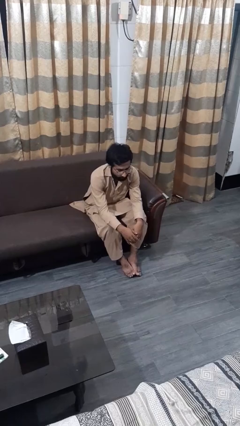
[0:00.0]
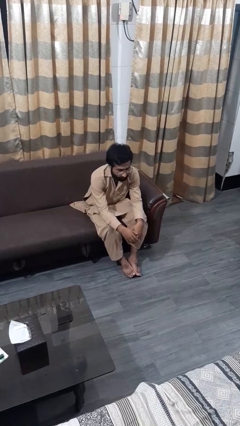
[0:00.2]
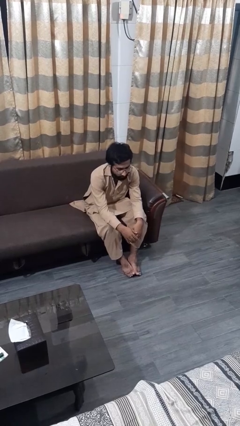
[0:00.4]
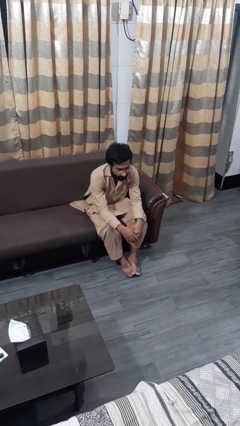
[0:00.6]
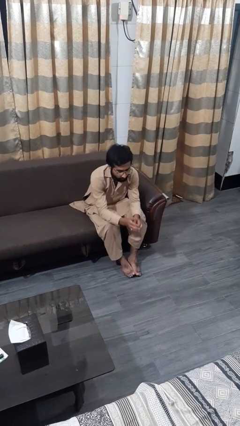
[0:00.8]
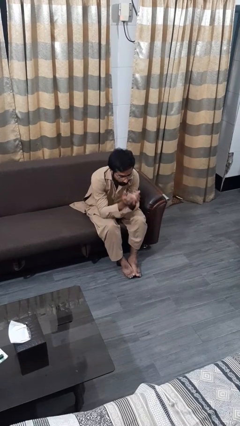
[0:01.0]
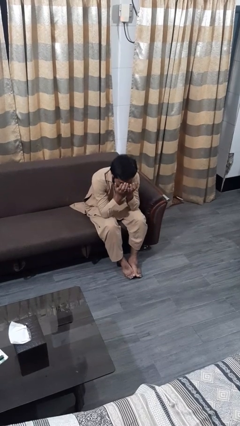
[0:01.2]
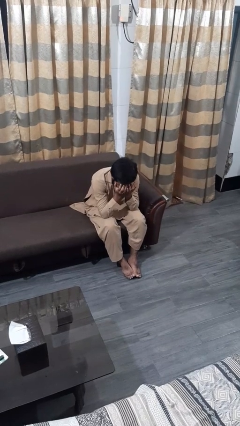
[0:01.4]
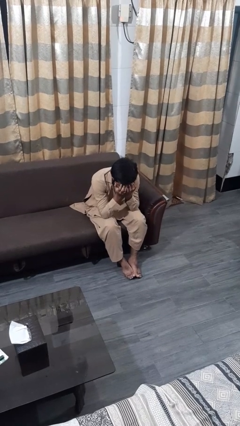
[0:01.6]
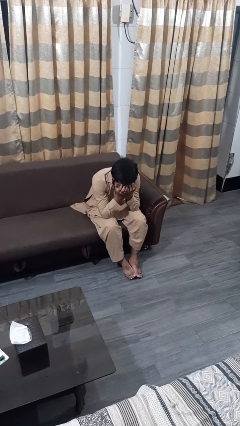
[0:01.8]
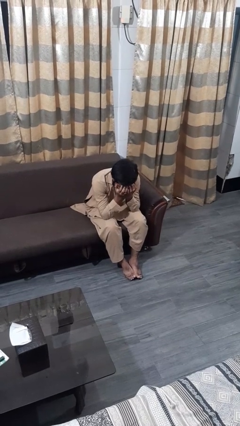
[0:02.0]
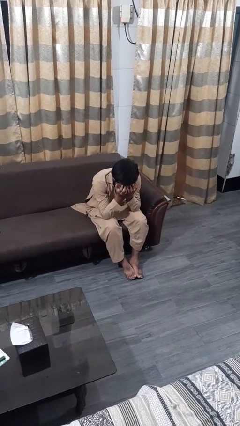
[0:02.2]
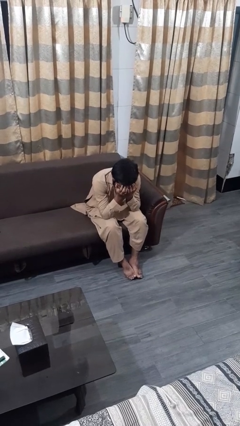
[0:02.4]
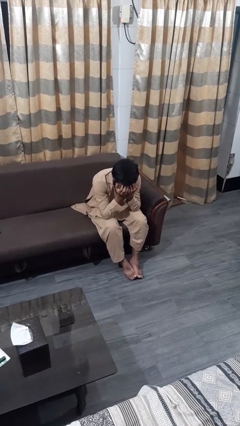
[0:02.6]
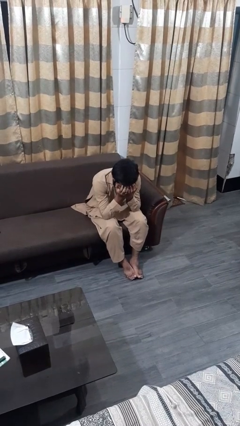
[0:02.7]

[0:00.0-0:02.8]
person covers face with hands

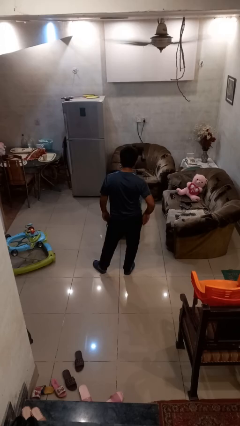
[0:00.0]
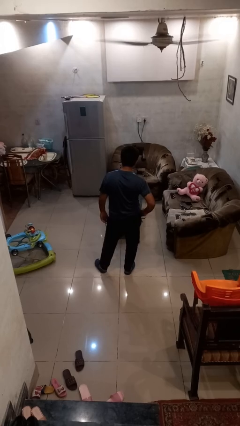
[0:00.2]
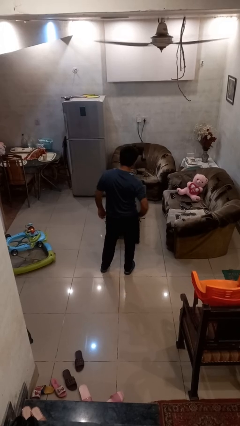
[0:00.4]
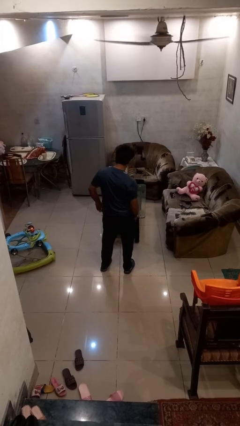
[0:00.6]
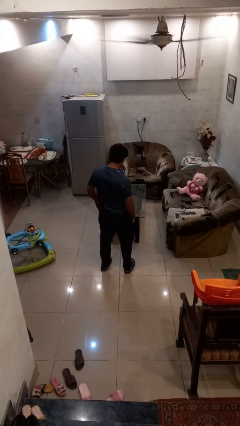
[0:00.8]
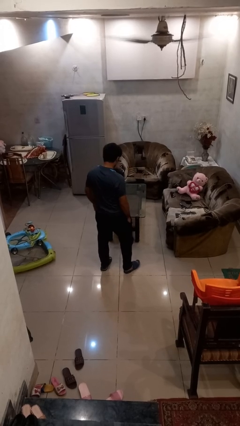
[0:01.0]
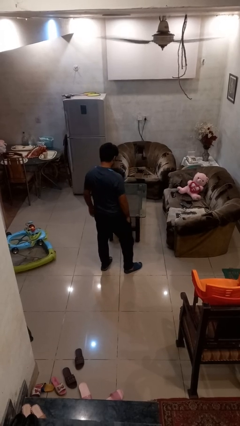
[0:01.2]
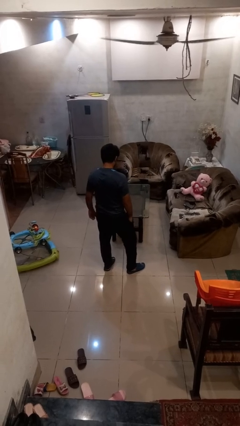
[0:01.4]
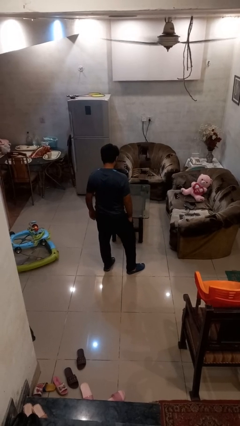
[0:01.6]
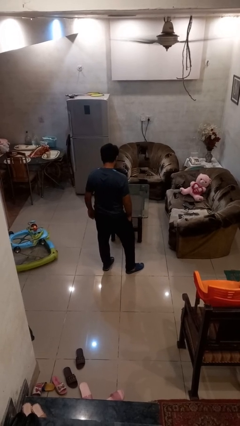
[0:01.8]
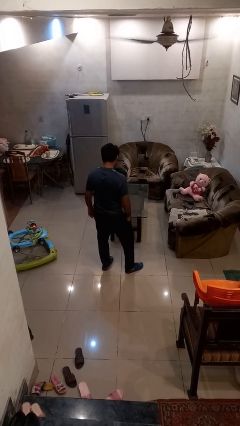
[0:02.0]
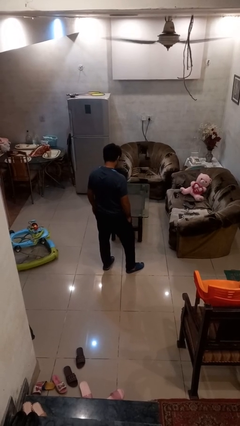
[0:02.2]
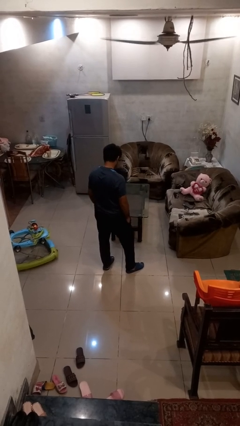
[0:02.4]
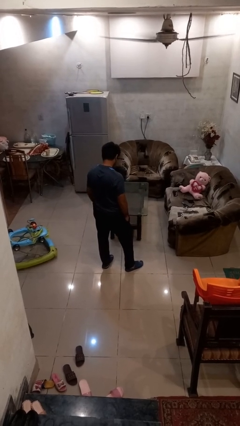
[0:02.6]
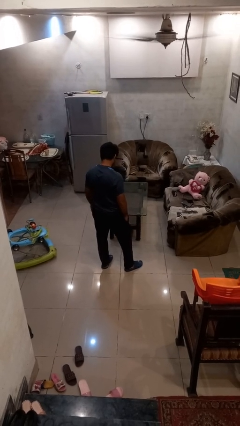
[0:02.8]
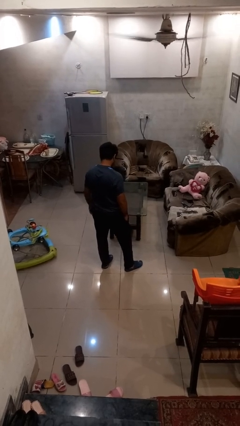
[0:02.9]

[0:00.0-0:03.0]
person puts hands in back pockets

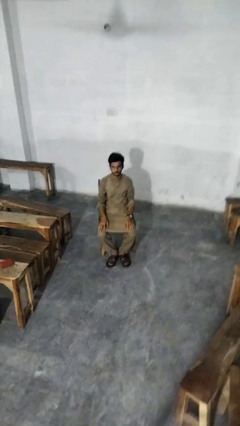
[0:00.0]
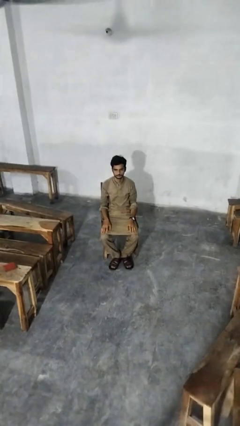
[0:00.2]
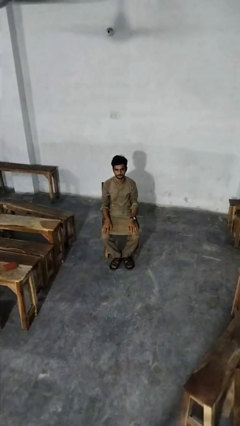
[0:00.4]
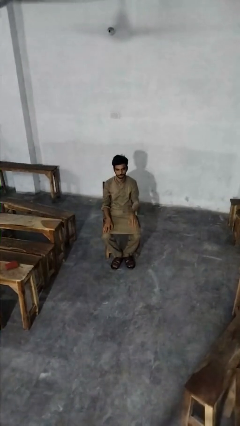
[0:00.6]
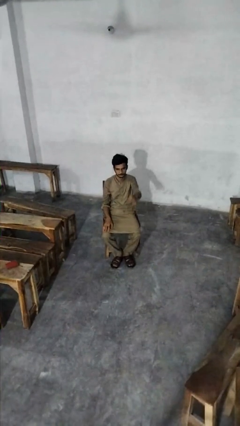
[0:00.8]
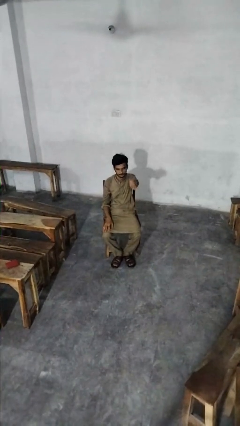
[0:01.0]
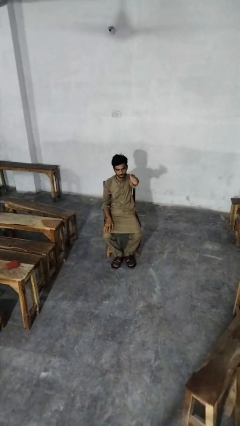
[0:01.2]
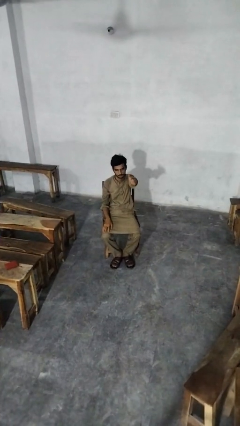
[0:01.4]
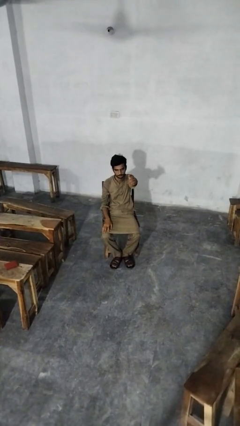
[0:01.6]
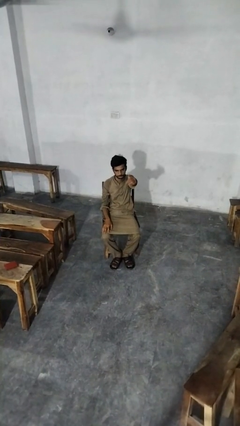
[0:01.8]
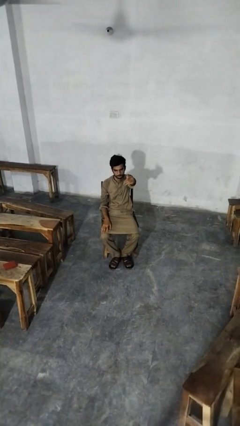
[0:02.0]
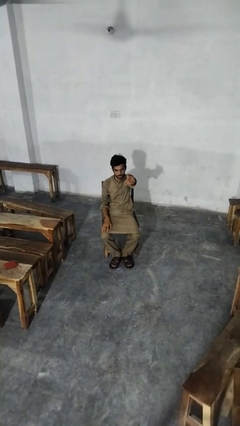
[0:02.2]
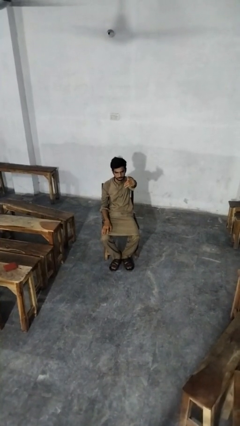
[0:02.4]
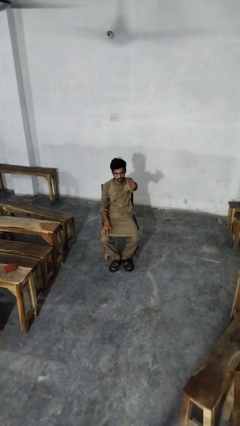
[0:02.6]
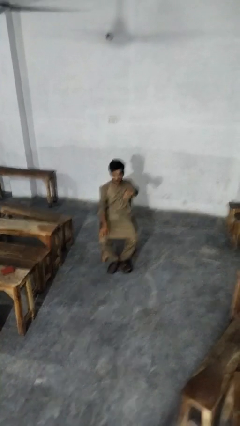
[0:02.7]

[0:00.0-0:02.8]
person gestures come here

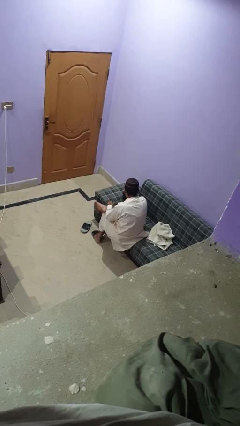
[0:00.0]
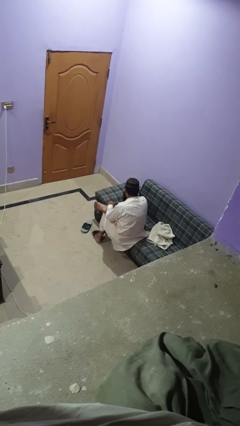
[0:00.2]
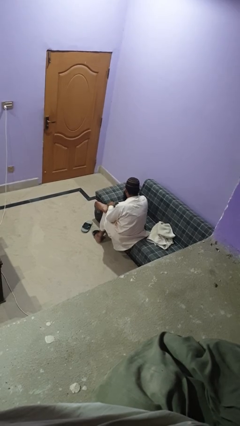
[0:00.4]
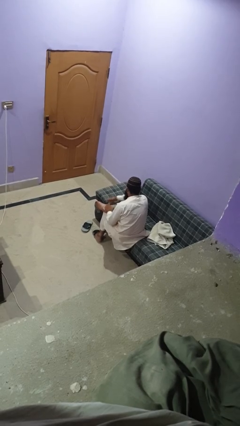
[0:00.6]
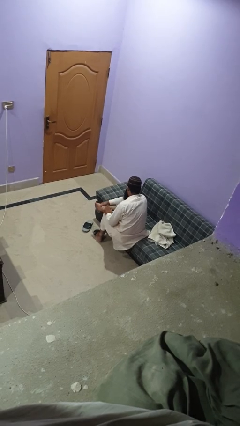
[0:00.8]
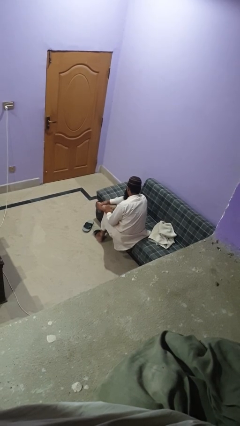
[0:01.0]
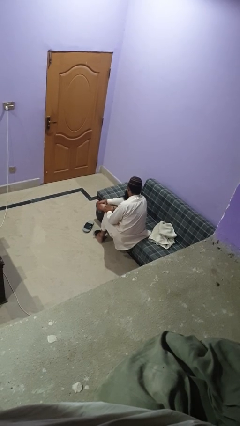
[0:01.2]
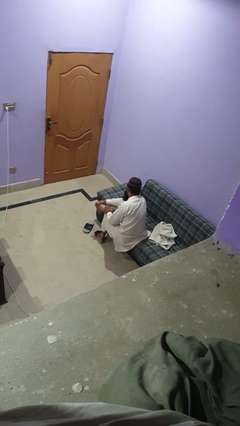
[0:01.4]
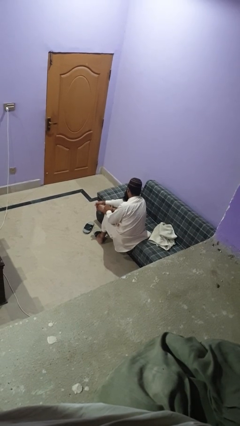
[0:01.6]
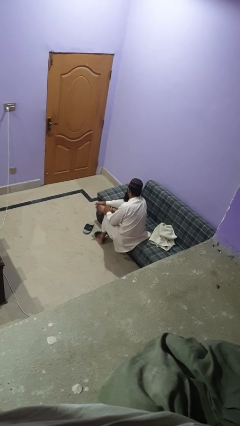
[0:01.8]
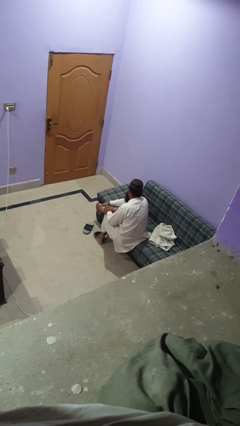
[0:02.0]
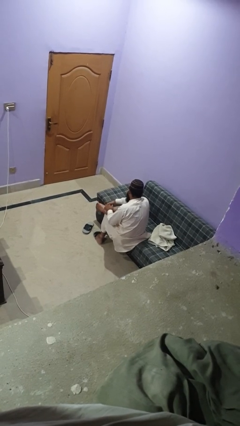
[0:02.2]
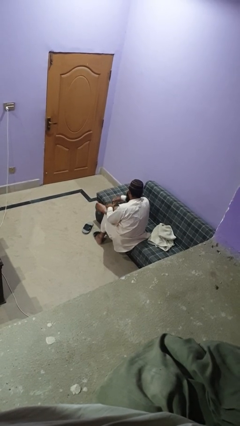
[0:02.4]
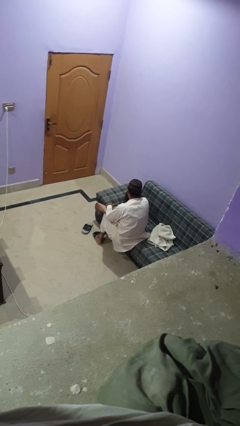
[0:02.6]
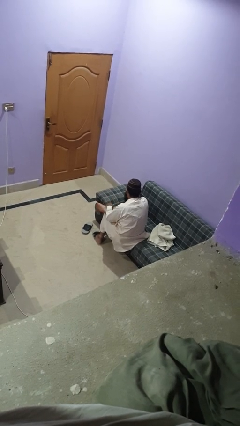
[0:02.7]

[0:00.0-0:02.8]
person rubs foot

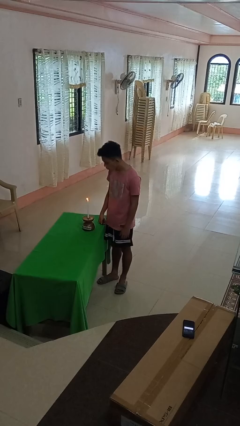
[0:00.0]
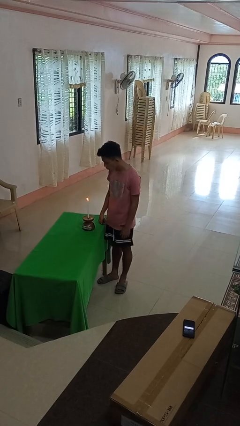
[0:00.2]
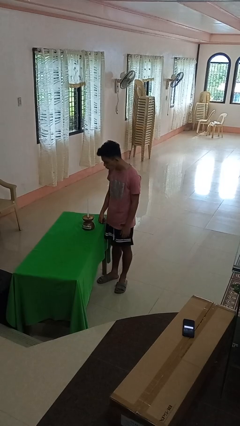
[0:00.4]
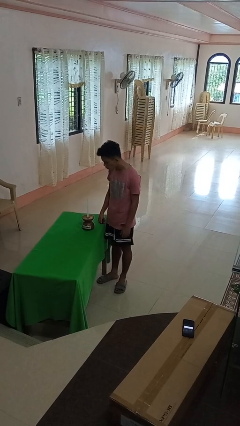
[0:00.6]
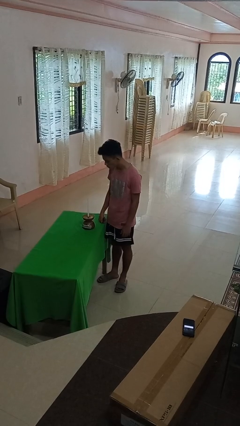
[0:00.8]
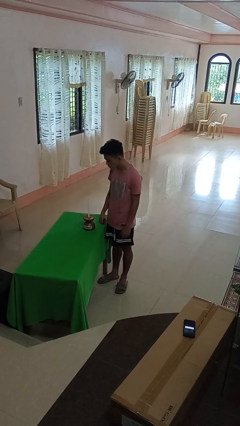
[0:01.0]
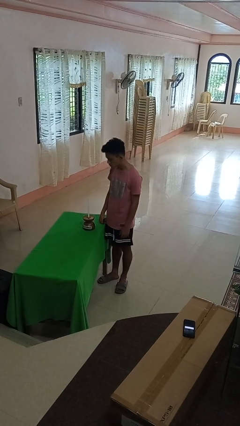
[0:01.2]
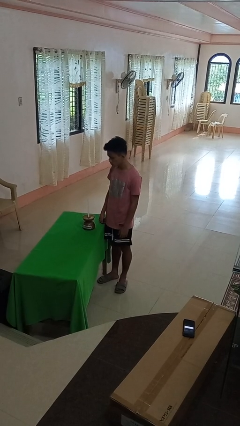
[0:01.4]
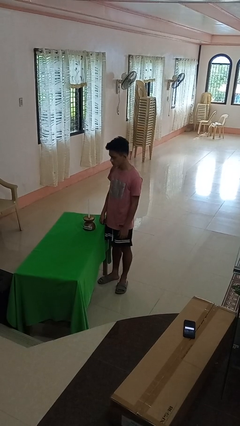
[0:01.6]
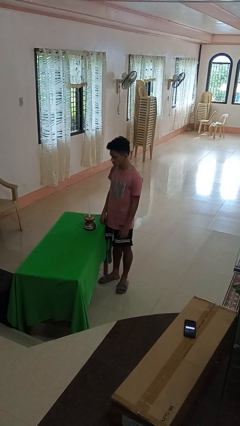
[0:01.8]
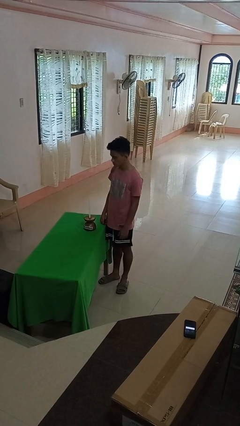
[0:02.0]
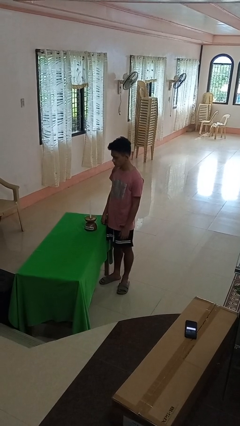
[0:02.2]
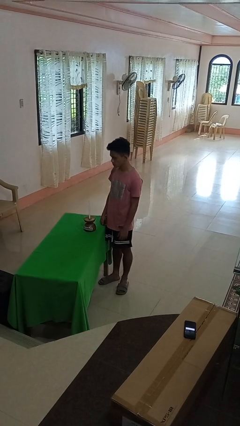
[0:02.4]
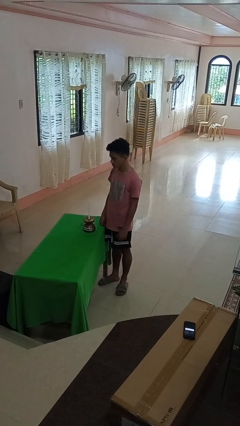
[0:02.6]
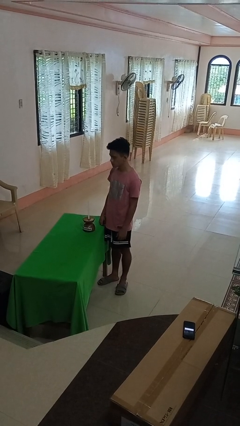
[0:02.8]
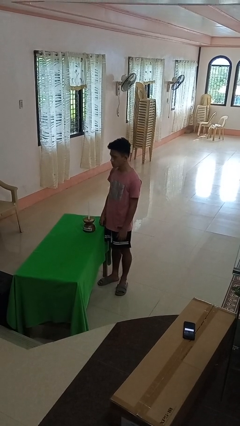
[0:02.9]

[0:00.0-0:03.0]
person extinguishes candle

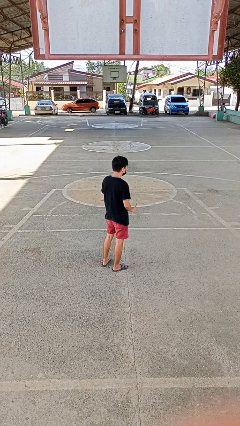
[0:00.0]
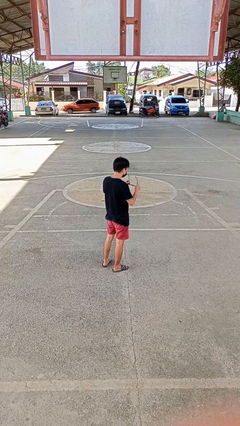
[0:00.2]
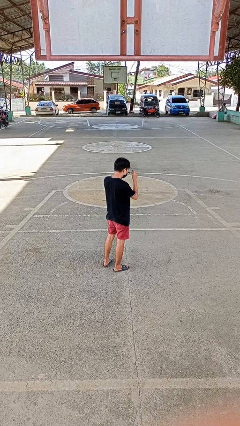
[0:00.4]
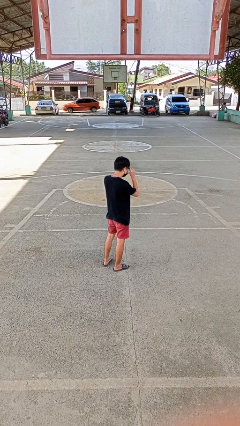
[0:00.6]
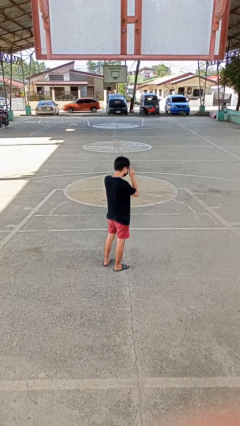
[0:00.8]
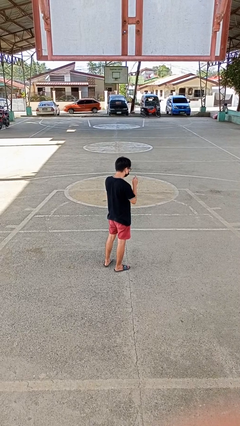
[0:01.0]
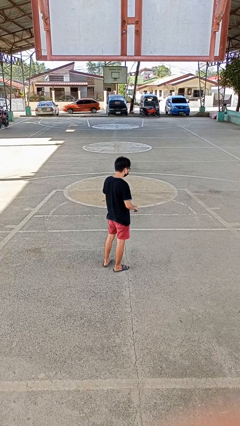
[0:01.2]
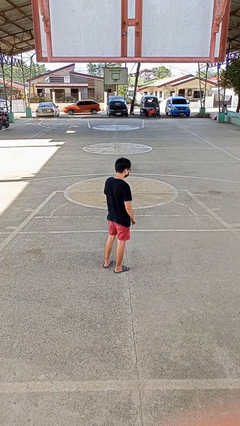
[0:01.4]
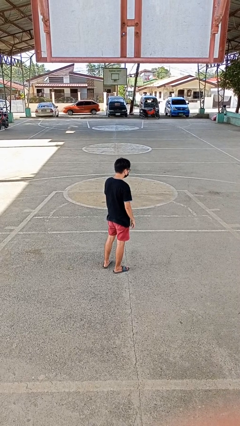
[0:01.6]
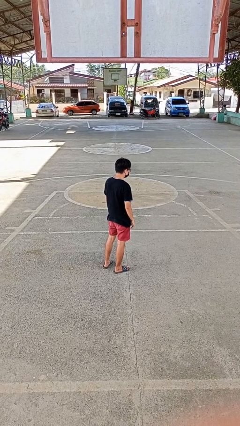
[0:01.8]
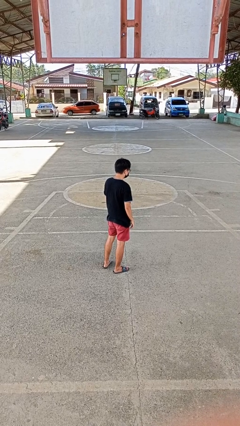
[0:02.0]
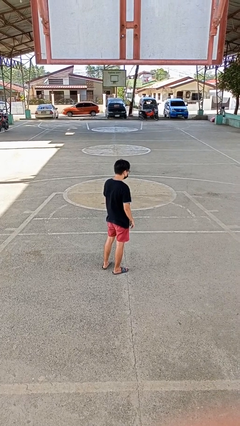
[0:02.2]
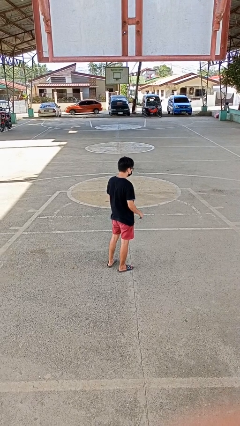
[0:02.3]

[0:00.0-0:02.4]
person puts on glasses

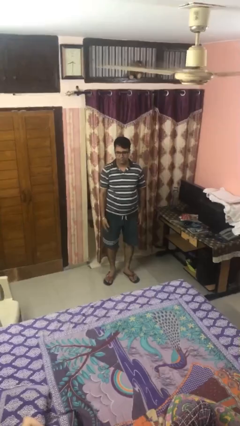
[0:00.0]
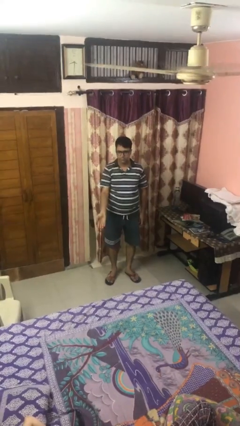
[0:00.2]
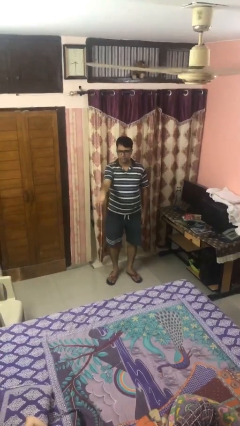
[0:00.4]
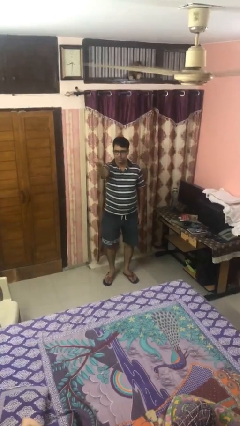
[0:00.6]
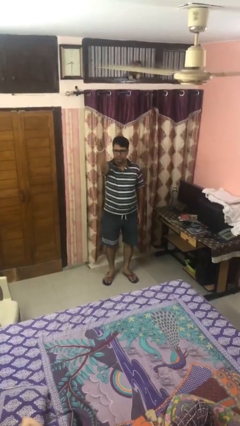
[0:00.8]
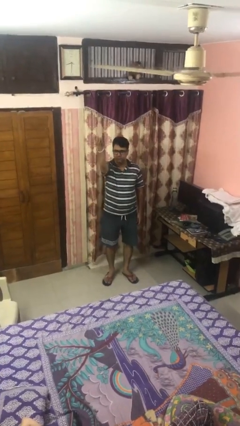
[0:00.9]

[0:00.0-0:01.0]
person gestures swipe up
